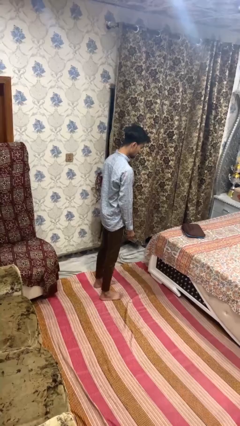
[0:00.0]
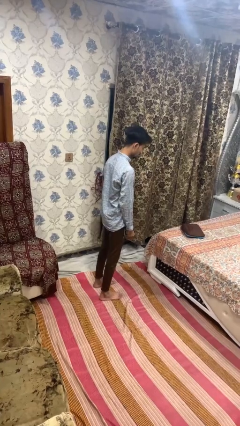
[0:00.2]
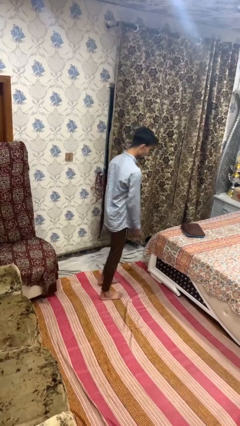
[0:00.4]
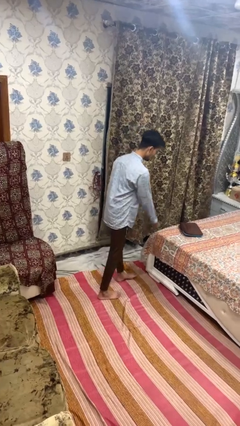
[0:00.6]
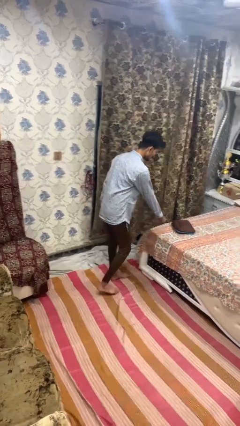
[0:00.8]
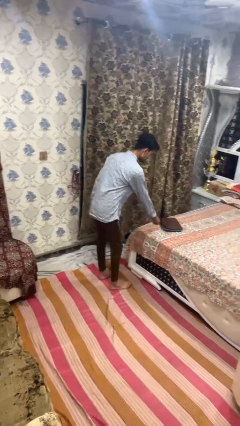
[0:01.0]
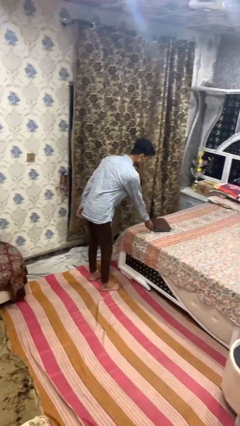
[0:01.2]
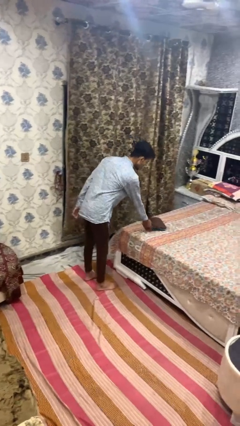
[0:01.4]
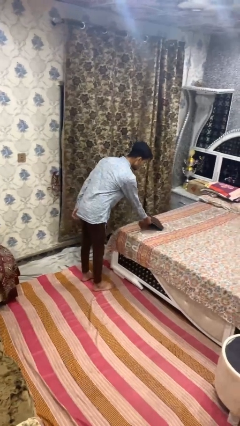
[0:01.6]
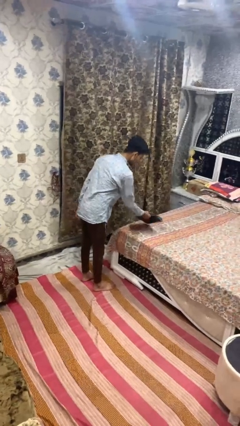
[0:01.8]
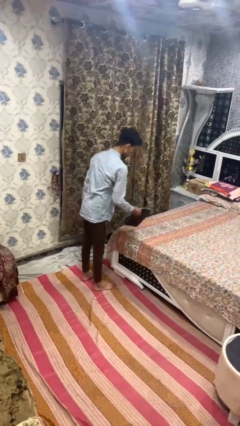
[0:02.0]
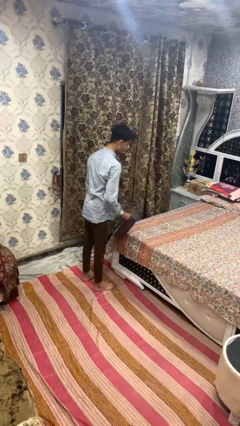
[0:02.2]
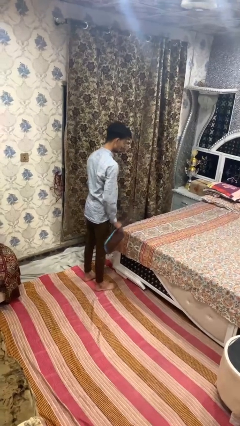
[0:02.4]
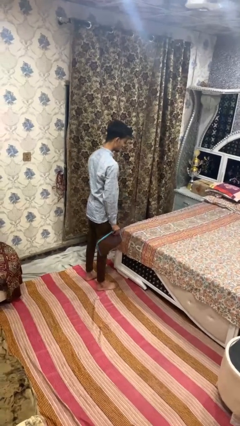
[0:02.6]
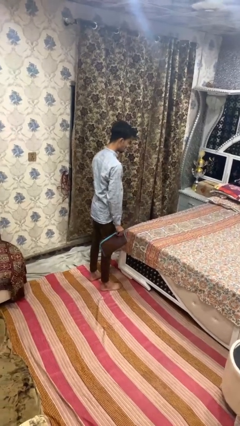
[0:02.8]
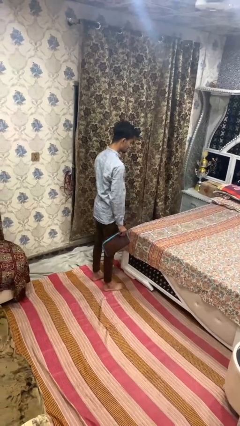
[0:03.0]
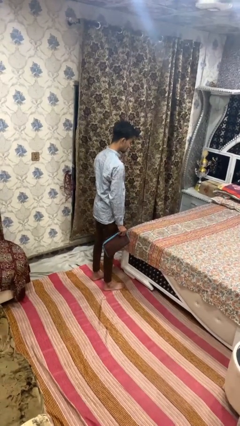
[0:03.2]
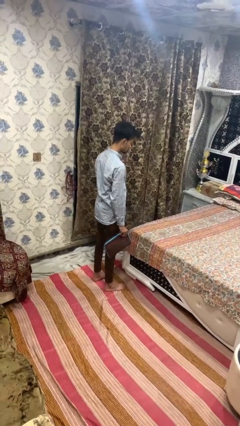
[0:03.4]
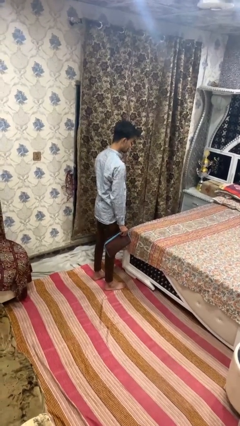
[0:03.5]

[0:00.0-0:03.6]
person picks up object from bed

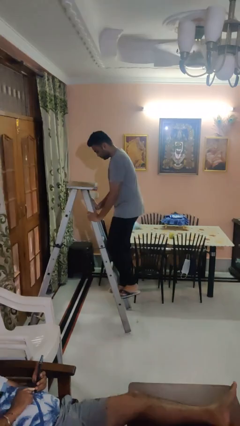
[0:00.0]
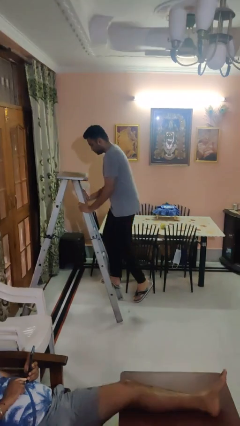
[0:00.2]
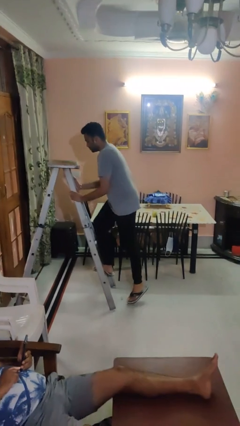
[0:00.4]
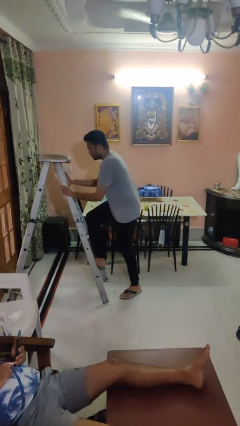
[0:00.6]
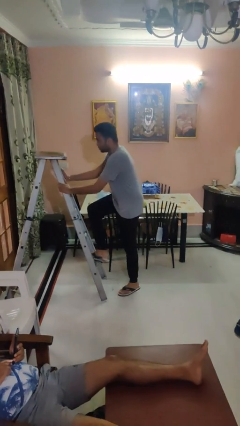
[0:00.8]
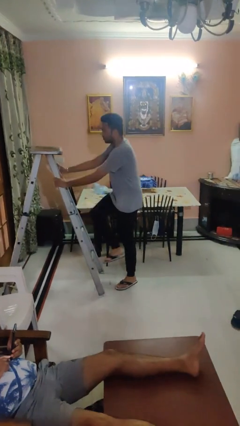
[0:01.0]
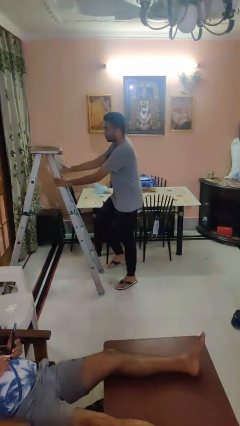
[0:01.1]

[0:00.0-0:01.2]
person climbs down ladder

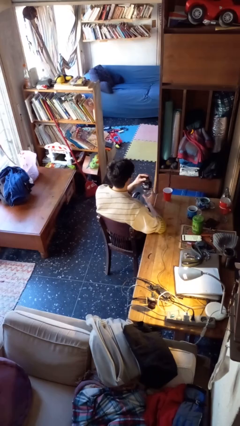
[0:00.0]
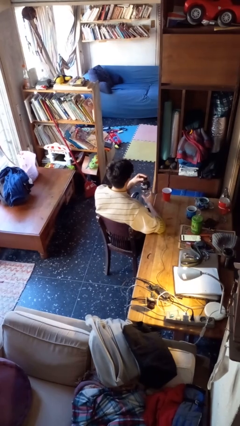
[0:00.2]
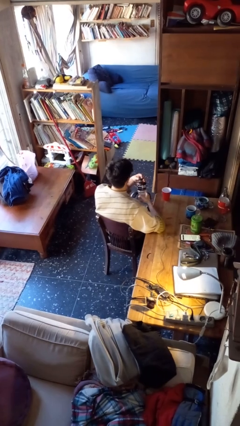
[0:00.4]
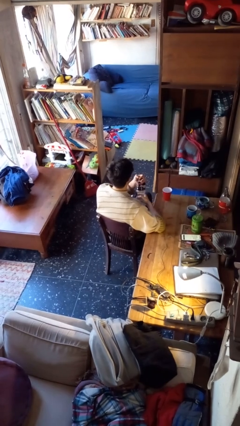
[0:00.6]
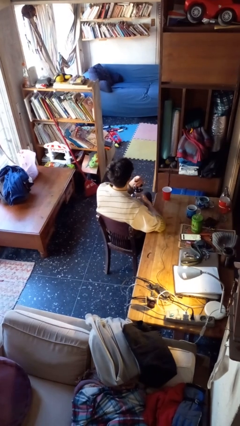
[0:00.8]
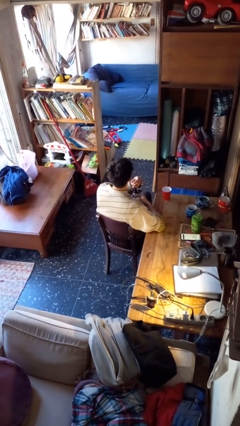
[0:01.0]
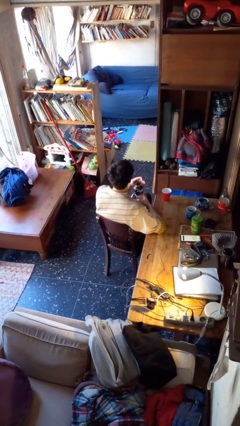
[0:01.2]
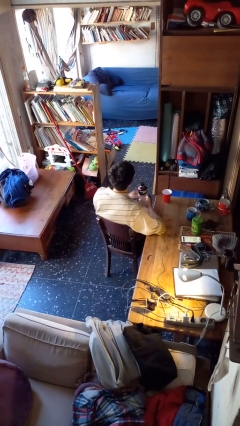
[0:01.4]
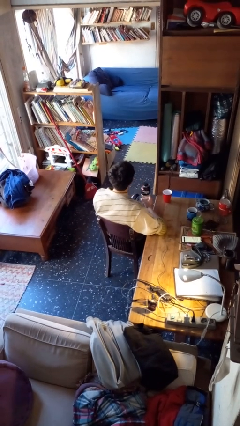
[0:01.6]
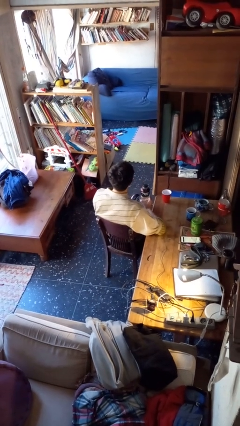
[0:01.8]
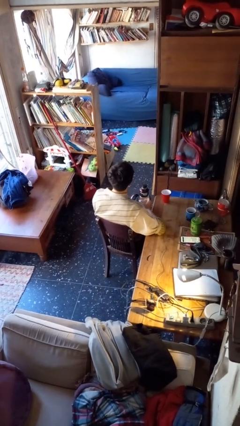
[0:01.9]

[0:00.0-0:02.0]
person screws lid to bottle

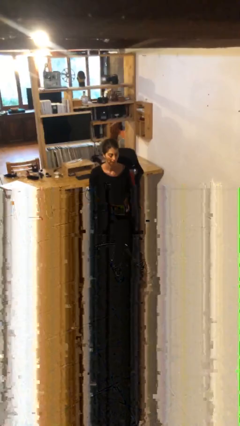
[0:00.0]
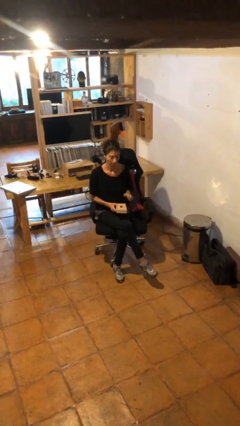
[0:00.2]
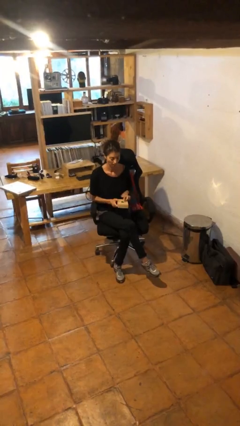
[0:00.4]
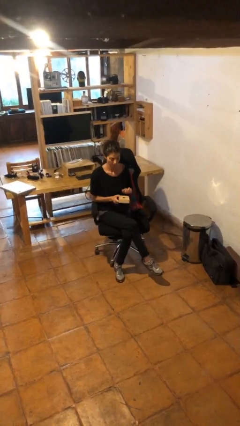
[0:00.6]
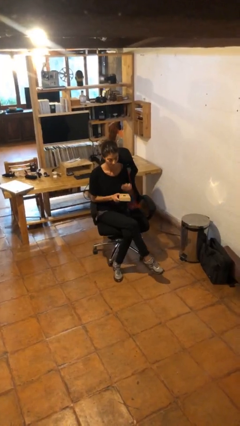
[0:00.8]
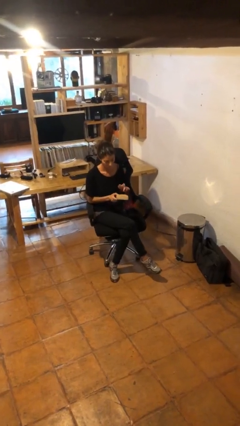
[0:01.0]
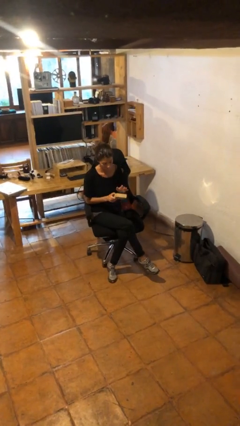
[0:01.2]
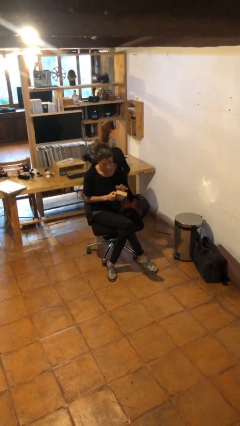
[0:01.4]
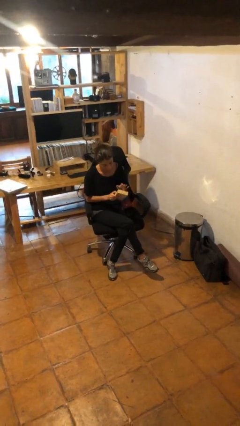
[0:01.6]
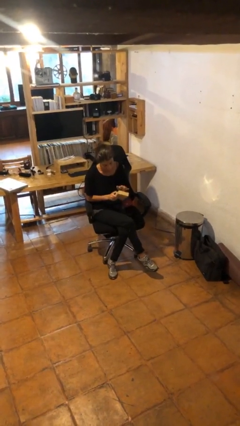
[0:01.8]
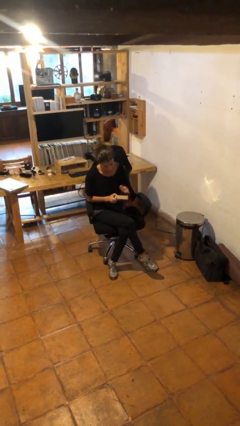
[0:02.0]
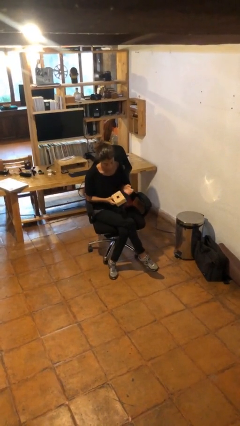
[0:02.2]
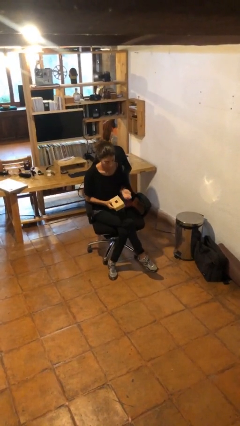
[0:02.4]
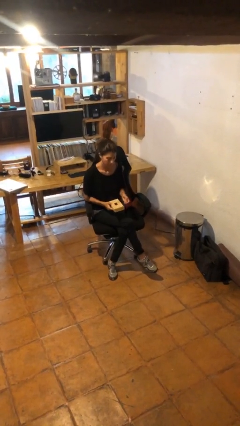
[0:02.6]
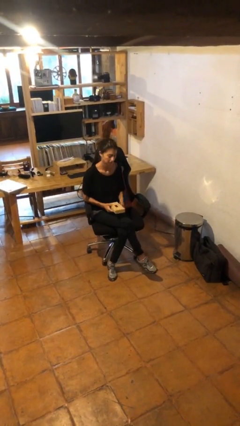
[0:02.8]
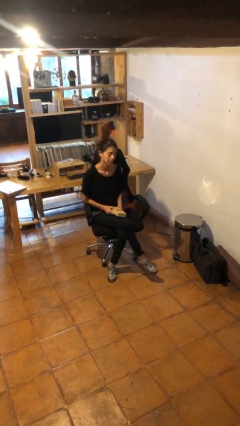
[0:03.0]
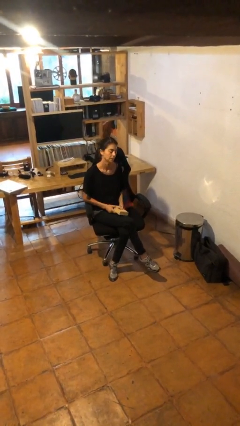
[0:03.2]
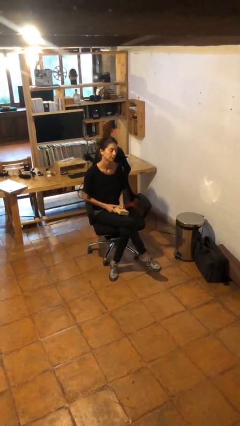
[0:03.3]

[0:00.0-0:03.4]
person taps object with finger

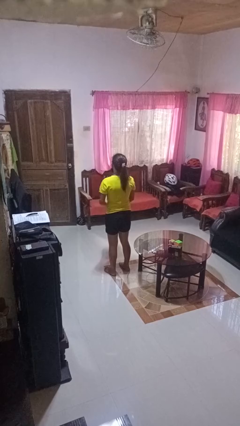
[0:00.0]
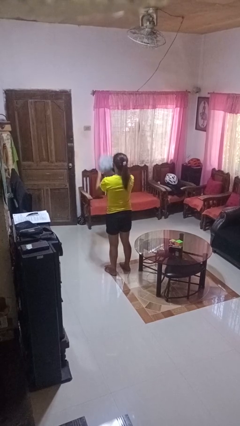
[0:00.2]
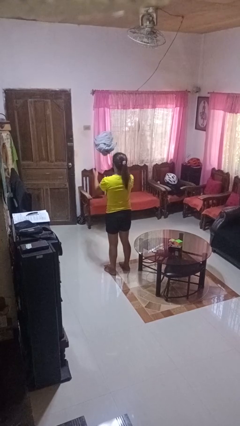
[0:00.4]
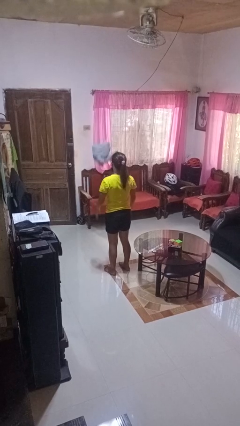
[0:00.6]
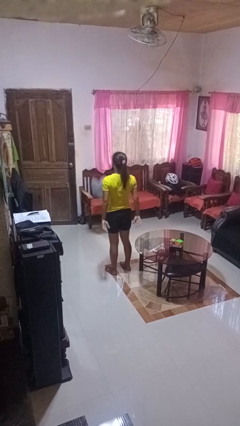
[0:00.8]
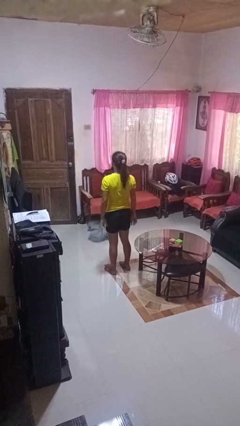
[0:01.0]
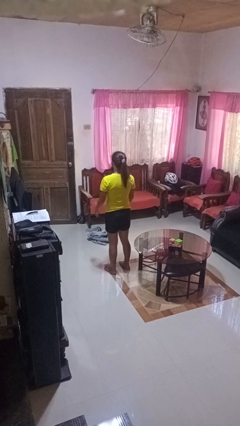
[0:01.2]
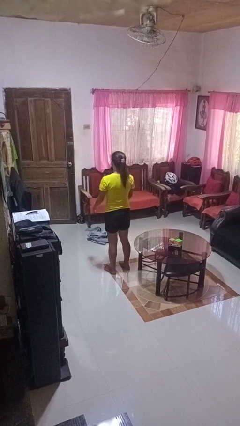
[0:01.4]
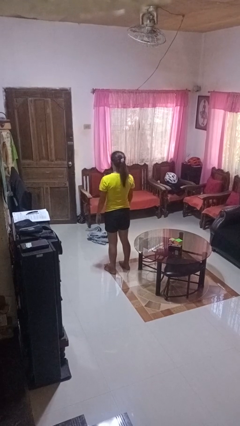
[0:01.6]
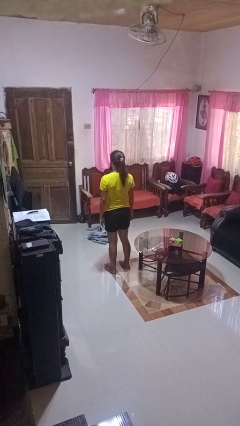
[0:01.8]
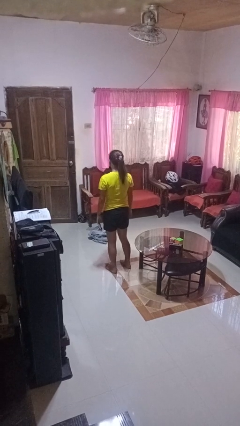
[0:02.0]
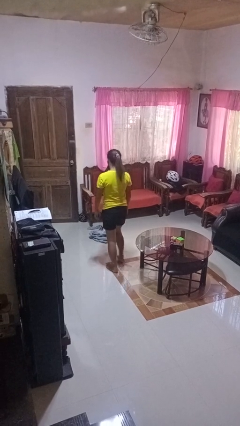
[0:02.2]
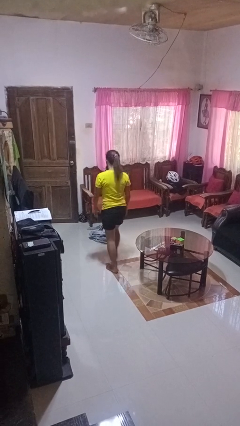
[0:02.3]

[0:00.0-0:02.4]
person throws object into air

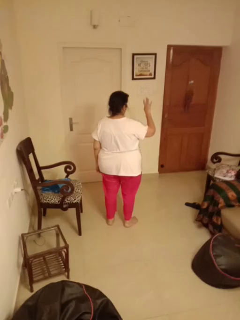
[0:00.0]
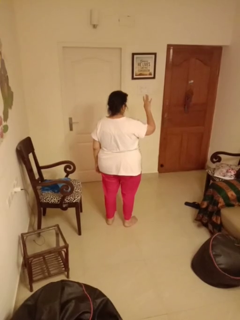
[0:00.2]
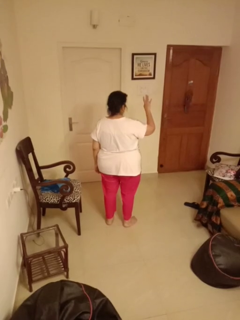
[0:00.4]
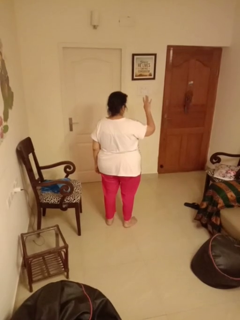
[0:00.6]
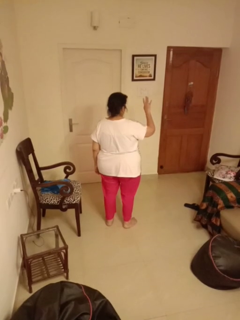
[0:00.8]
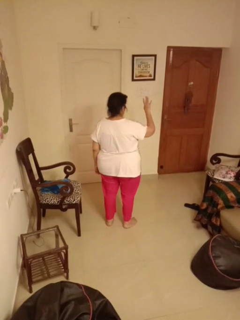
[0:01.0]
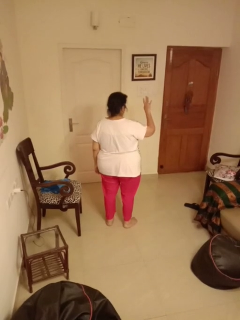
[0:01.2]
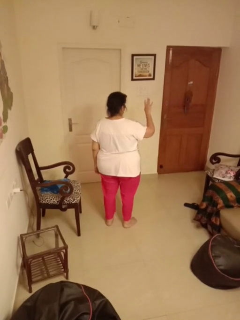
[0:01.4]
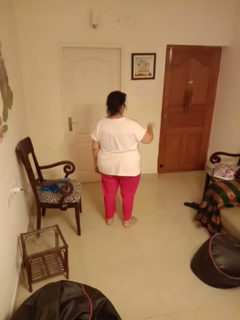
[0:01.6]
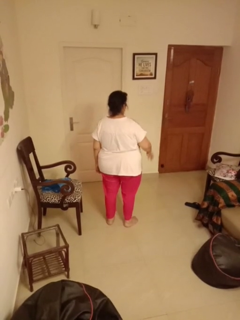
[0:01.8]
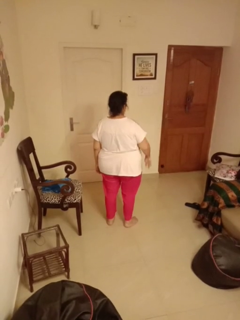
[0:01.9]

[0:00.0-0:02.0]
person gestures number four

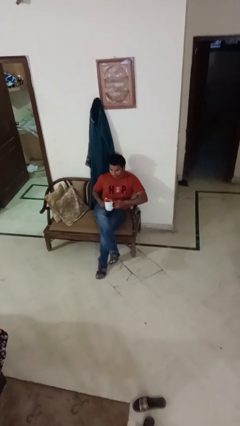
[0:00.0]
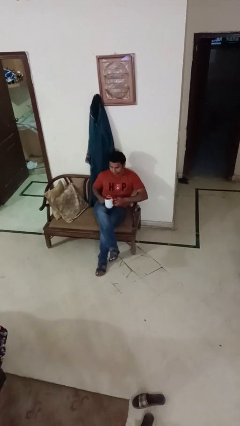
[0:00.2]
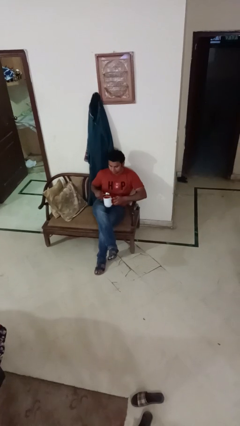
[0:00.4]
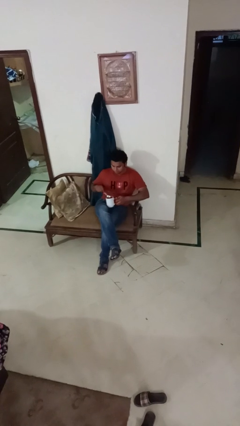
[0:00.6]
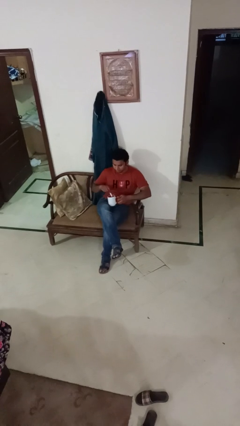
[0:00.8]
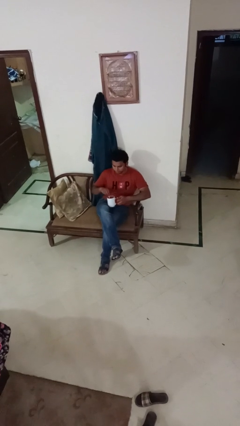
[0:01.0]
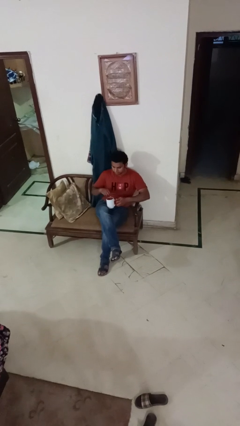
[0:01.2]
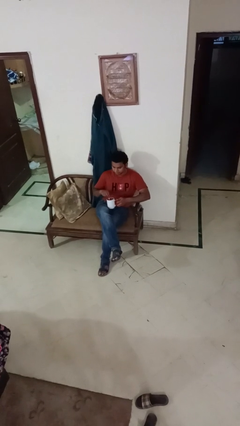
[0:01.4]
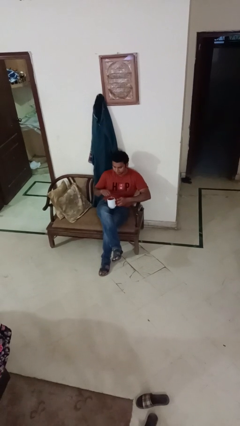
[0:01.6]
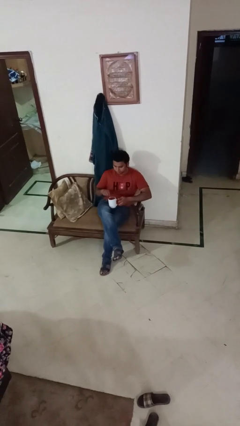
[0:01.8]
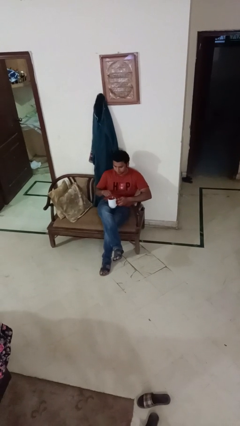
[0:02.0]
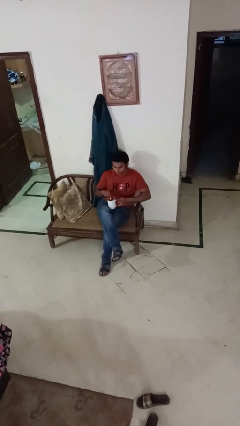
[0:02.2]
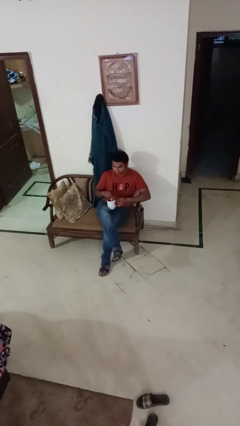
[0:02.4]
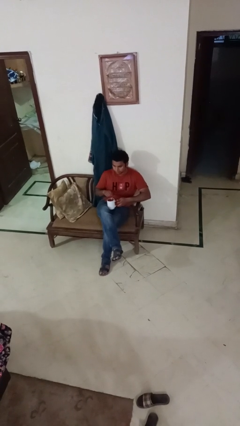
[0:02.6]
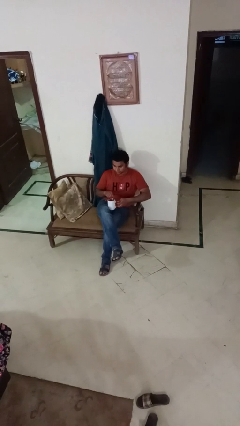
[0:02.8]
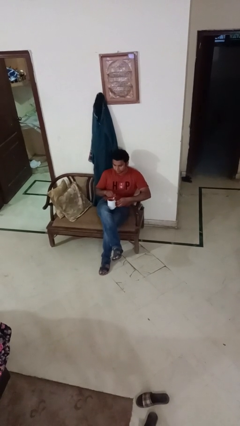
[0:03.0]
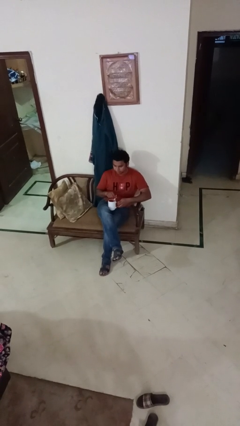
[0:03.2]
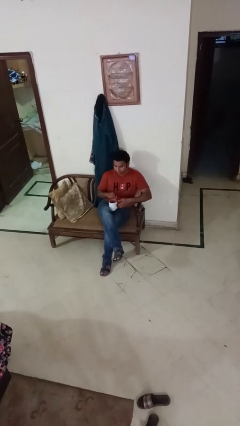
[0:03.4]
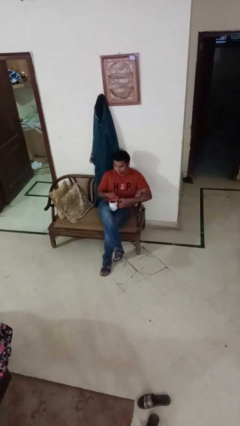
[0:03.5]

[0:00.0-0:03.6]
person stirs mug
